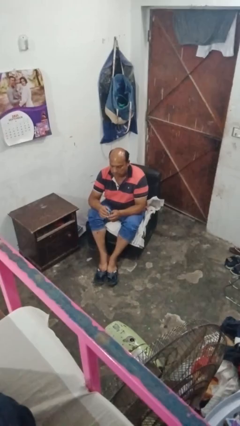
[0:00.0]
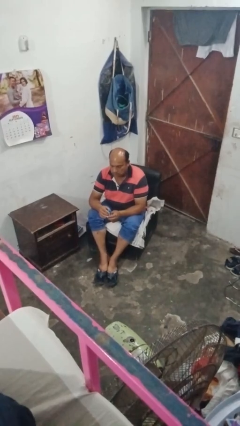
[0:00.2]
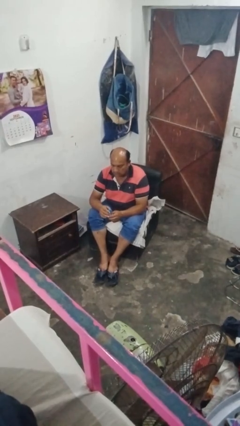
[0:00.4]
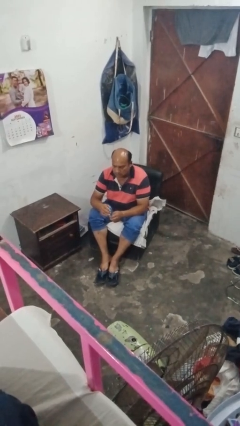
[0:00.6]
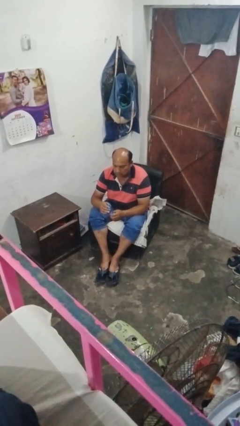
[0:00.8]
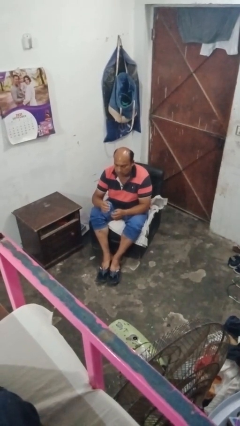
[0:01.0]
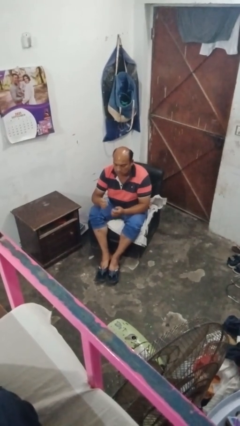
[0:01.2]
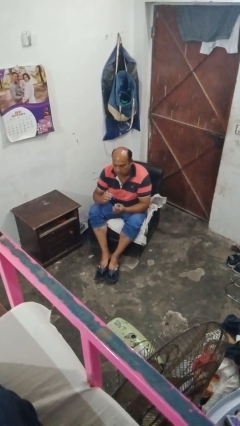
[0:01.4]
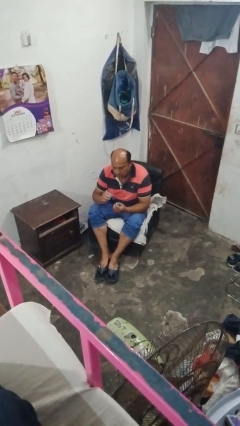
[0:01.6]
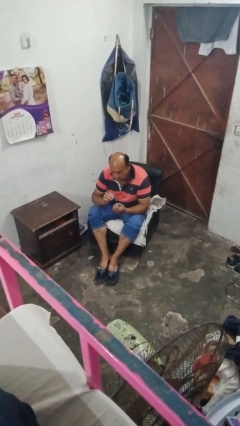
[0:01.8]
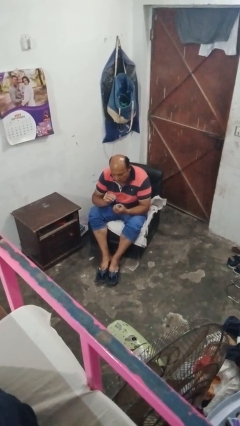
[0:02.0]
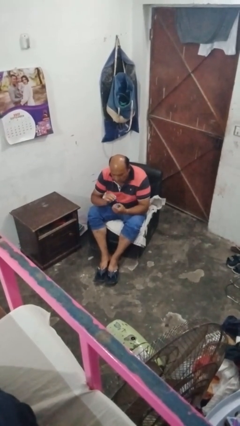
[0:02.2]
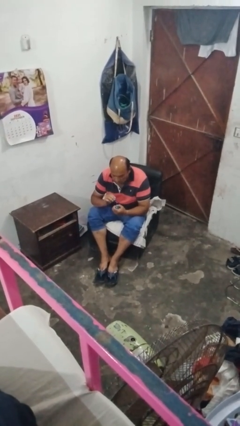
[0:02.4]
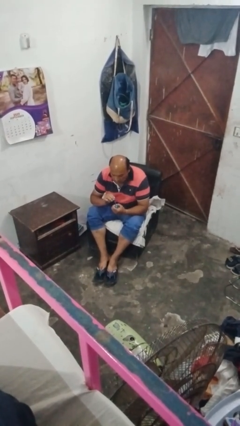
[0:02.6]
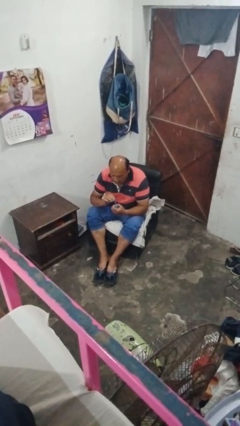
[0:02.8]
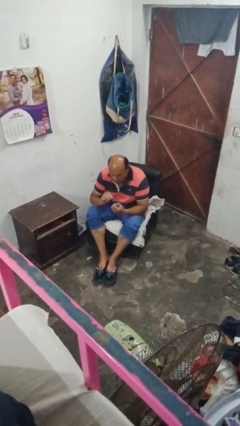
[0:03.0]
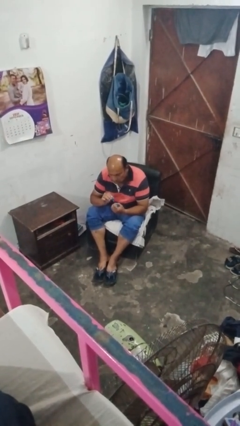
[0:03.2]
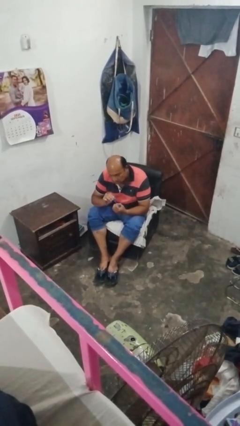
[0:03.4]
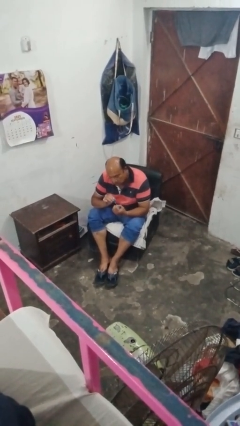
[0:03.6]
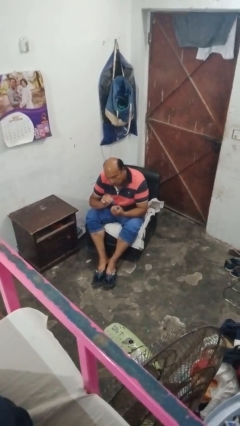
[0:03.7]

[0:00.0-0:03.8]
person paints fingernails

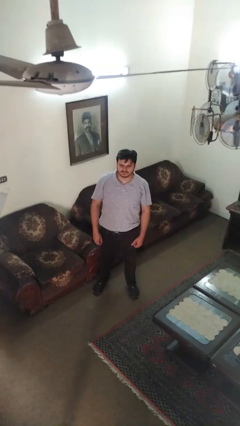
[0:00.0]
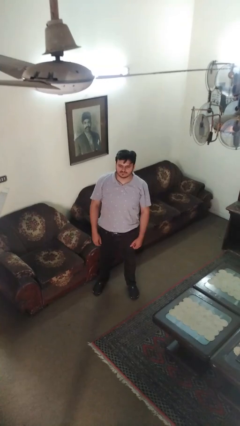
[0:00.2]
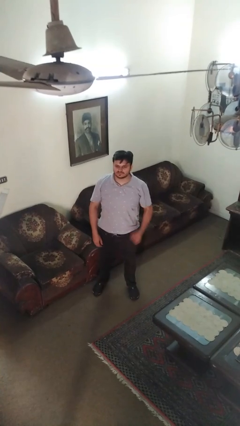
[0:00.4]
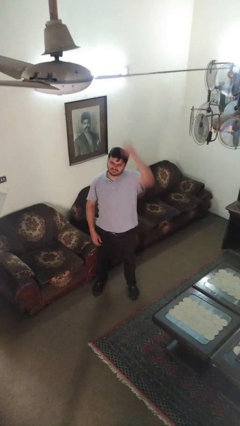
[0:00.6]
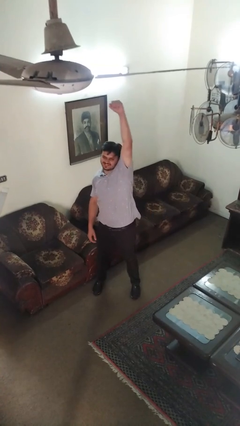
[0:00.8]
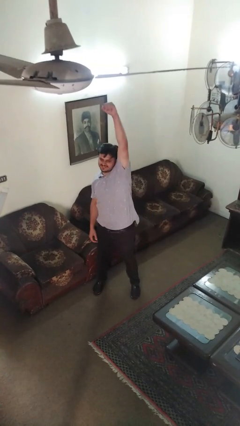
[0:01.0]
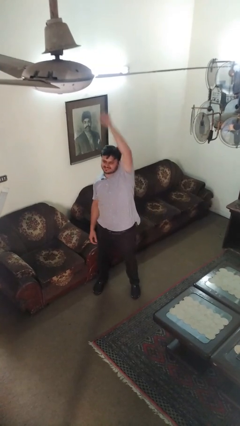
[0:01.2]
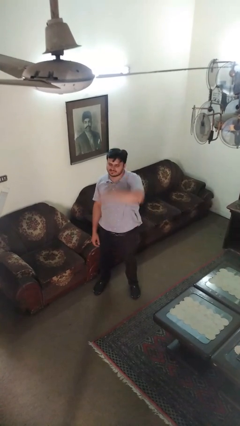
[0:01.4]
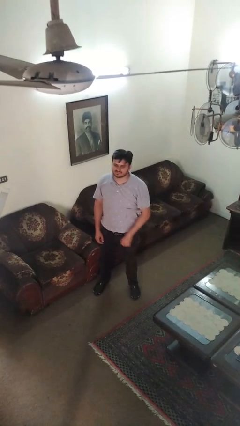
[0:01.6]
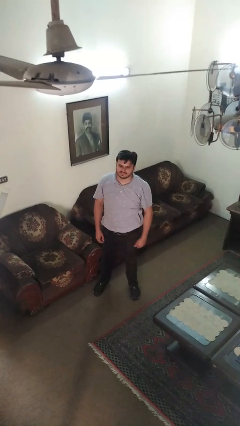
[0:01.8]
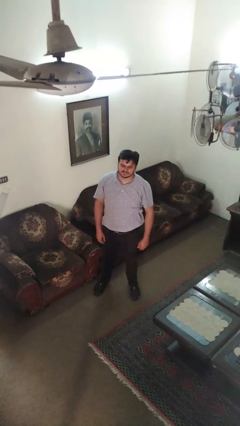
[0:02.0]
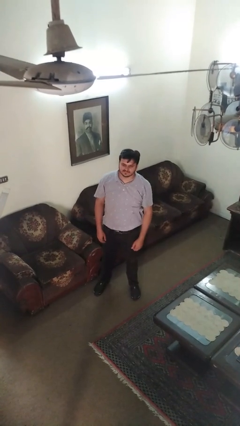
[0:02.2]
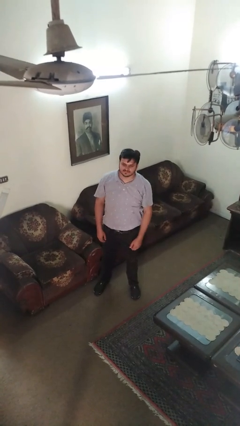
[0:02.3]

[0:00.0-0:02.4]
person punches

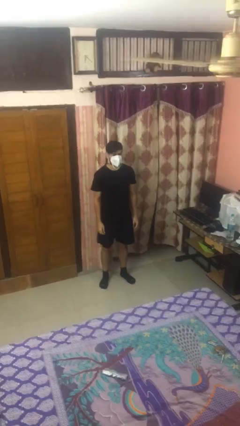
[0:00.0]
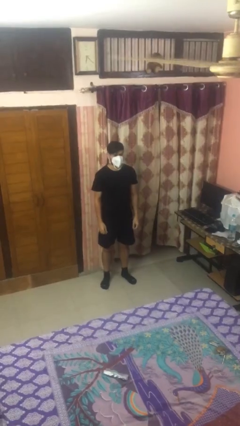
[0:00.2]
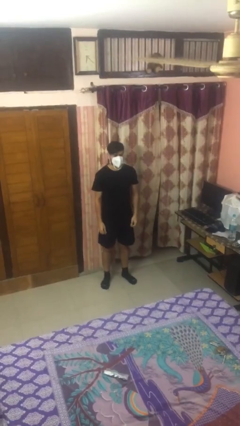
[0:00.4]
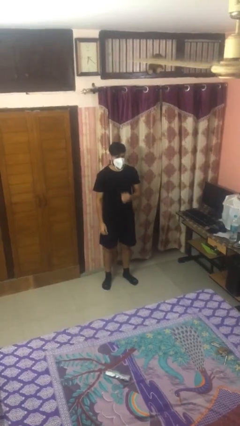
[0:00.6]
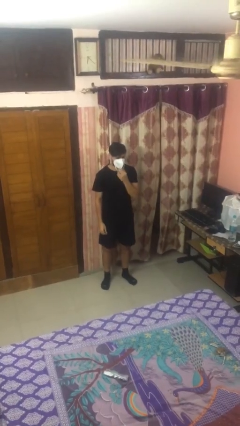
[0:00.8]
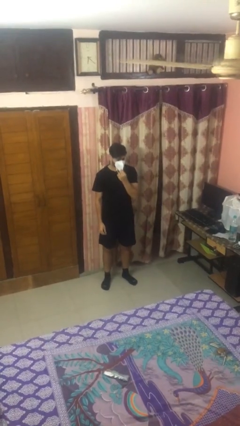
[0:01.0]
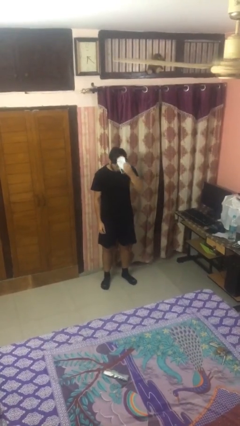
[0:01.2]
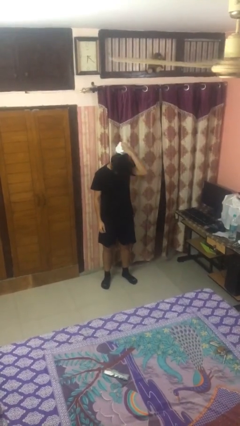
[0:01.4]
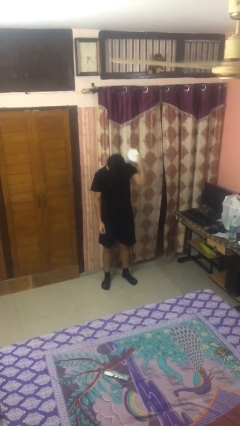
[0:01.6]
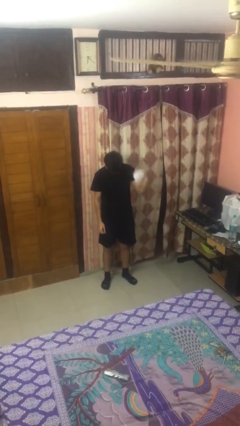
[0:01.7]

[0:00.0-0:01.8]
person takes off facemask

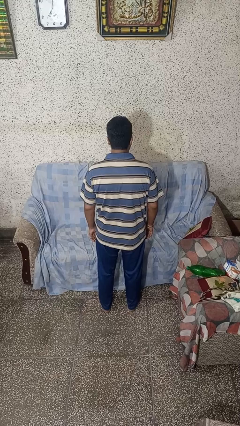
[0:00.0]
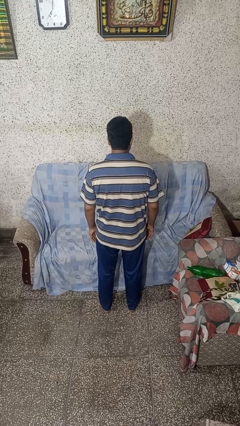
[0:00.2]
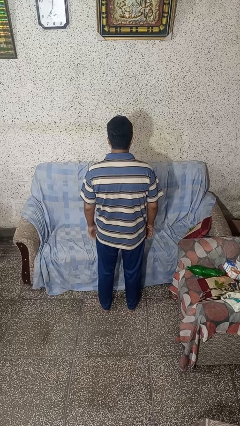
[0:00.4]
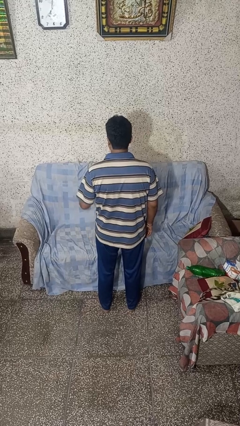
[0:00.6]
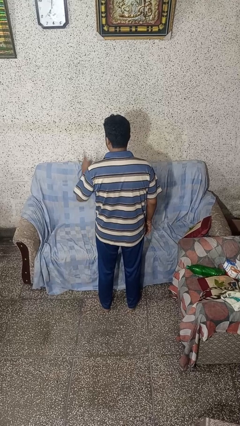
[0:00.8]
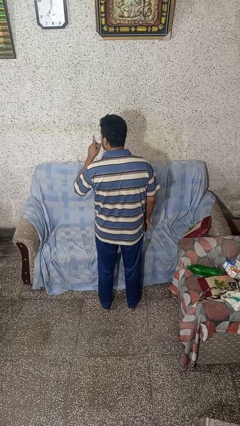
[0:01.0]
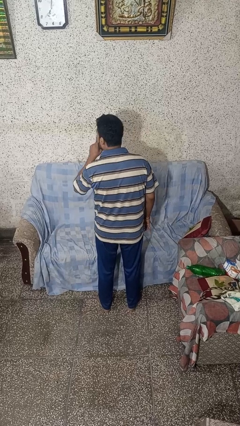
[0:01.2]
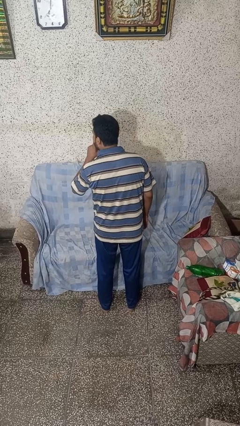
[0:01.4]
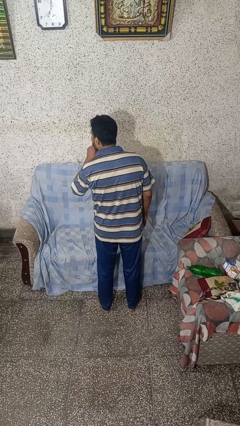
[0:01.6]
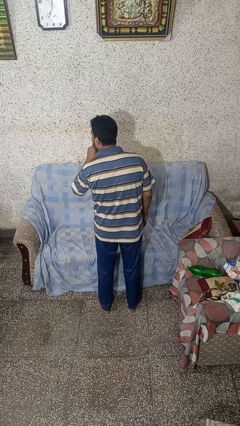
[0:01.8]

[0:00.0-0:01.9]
person gestures be quiet

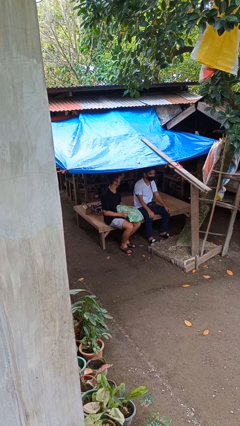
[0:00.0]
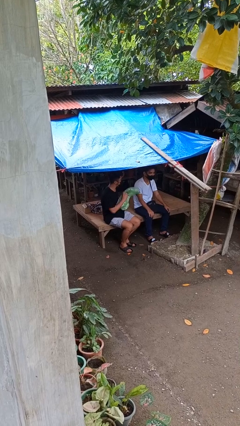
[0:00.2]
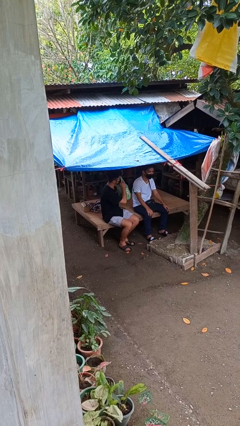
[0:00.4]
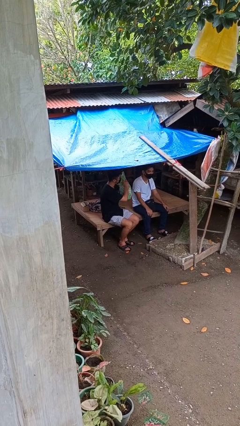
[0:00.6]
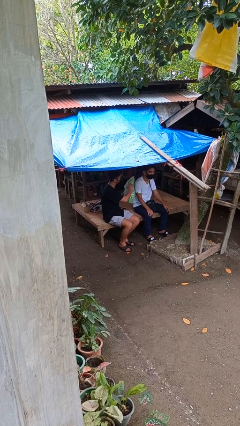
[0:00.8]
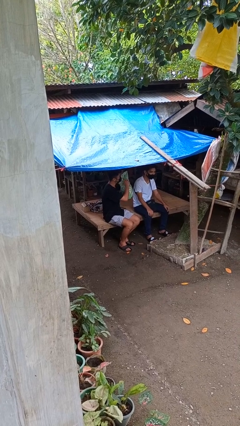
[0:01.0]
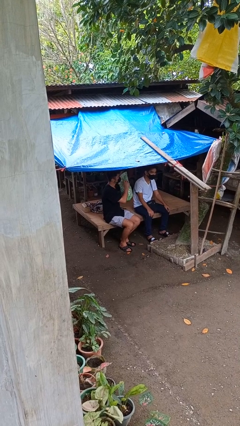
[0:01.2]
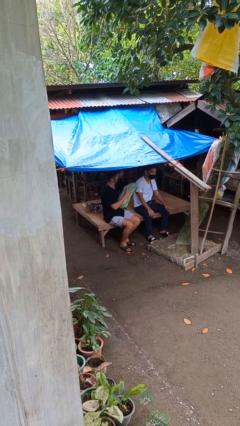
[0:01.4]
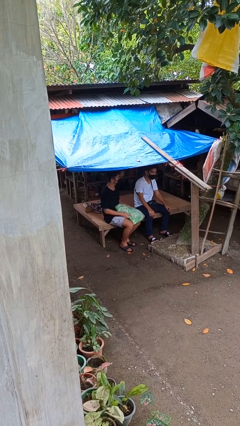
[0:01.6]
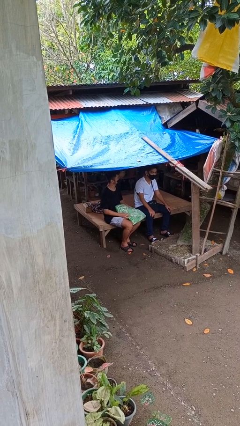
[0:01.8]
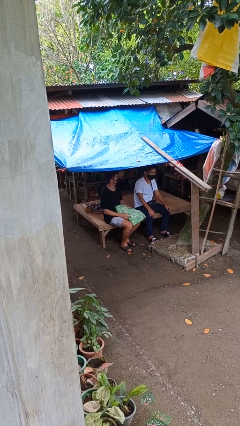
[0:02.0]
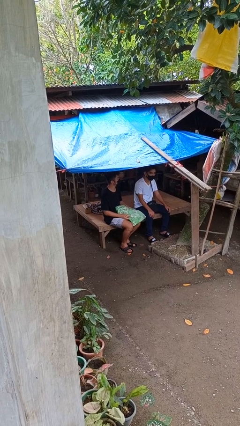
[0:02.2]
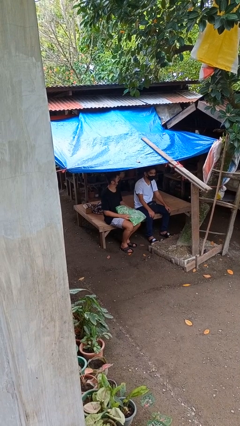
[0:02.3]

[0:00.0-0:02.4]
person hits person with pillow

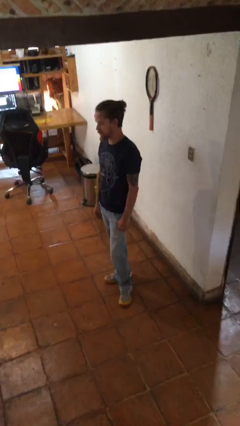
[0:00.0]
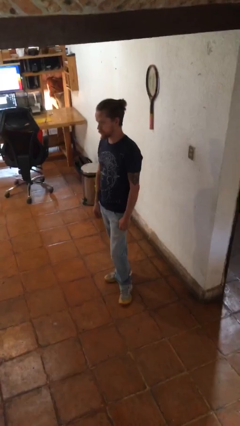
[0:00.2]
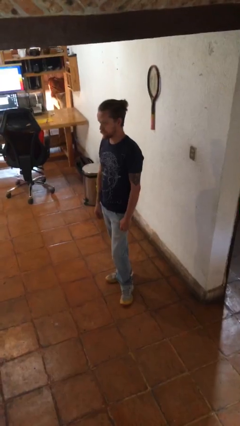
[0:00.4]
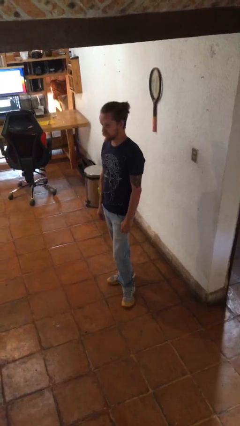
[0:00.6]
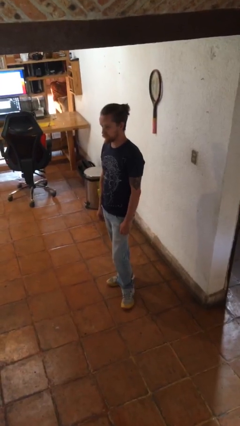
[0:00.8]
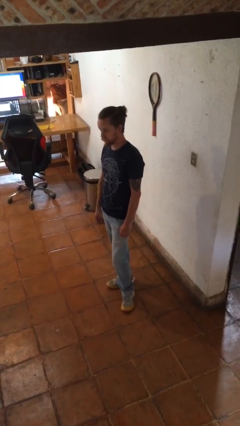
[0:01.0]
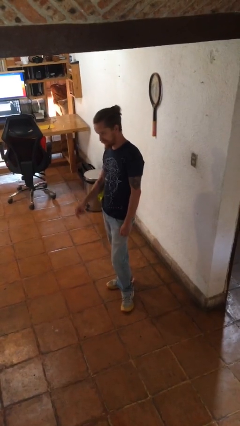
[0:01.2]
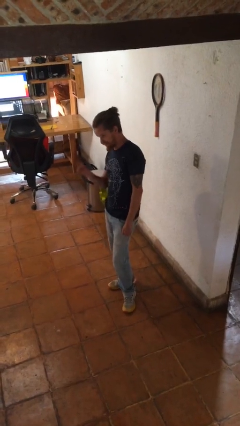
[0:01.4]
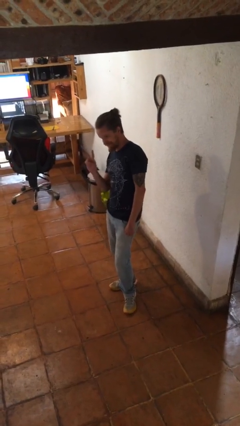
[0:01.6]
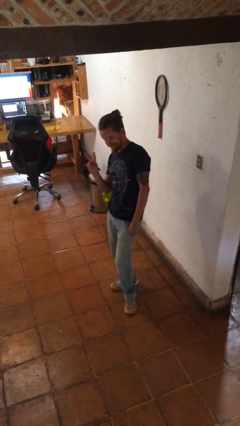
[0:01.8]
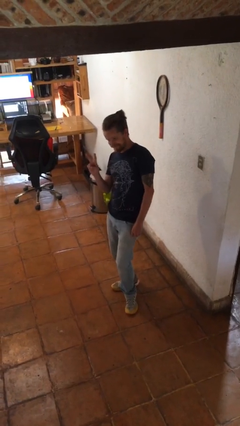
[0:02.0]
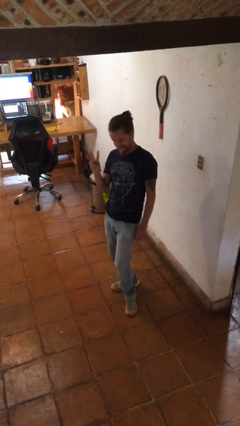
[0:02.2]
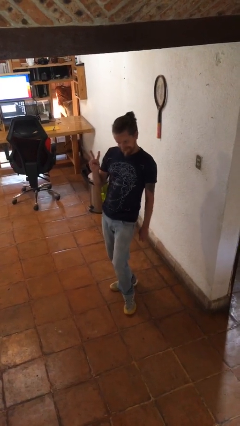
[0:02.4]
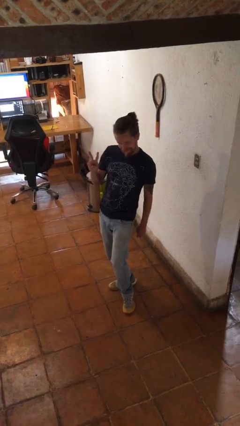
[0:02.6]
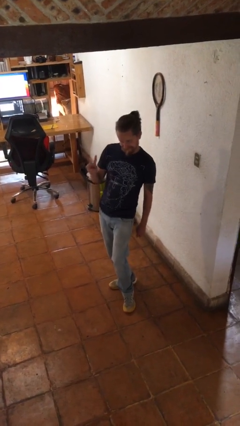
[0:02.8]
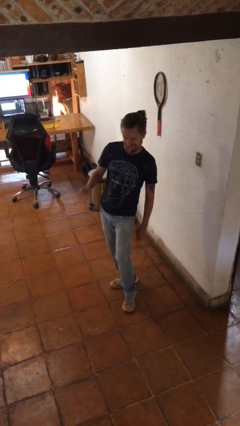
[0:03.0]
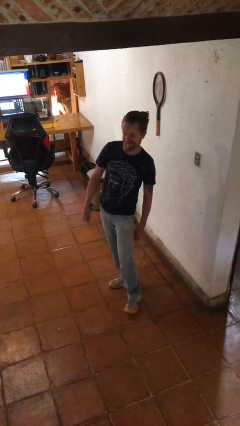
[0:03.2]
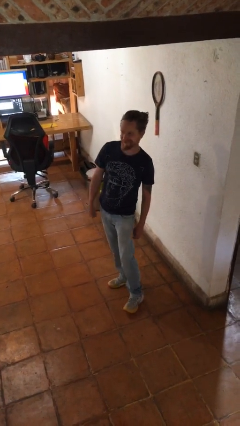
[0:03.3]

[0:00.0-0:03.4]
person gestures peace

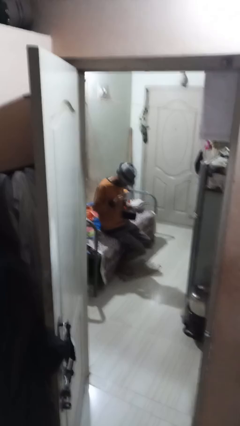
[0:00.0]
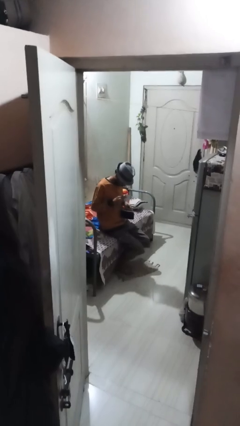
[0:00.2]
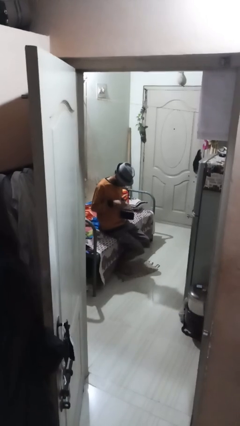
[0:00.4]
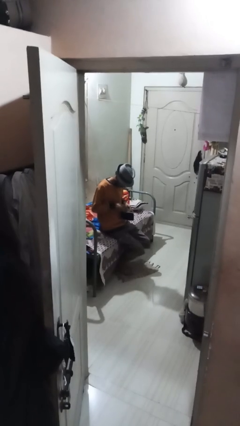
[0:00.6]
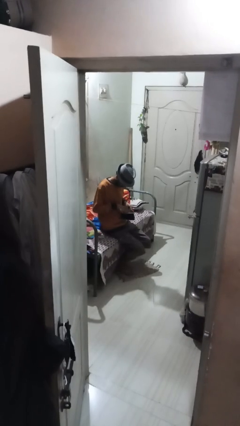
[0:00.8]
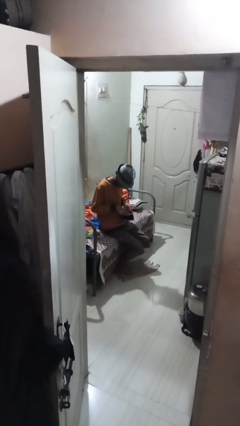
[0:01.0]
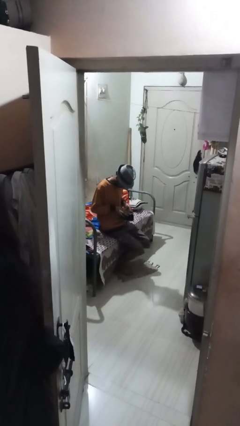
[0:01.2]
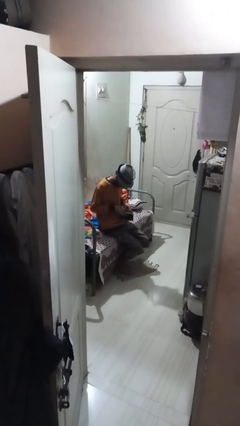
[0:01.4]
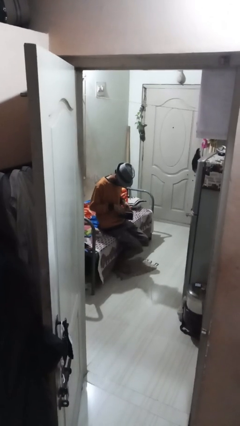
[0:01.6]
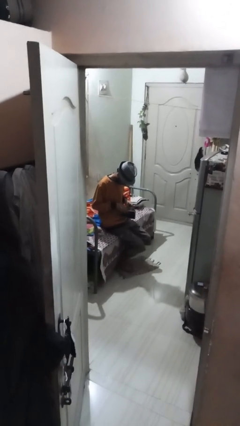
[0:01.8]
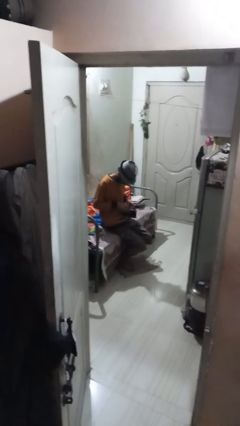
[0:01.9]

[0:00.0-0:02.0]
person puts object into purse
